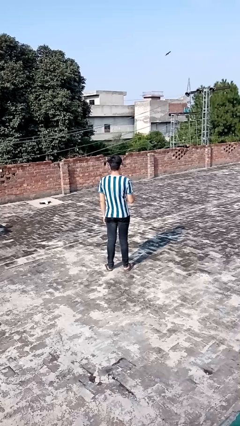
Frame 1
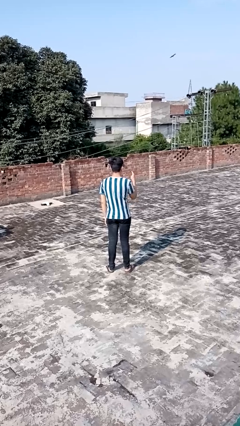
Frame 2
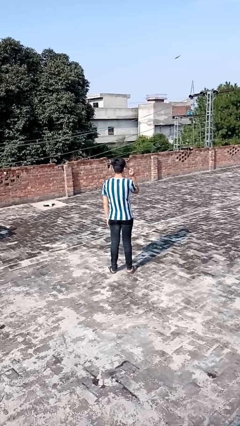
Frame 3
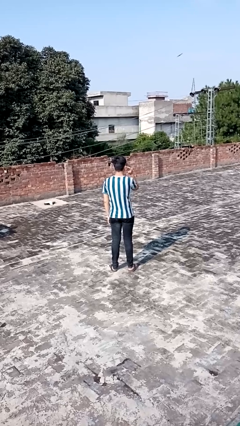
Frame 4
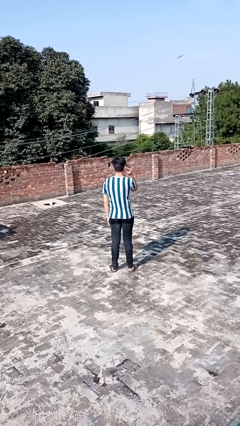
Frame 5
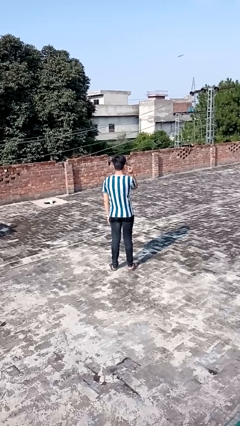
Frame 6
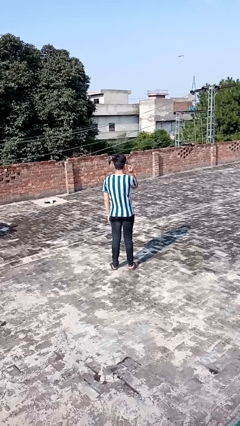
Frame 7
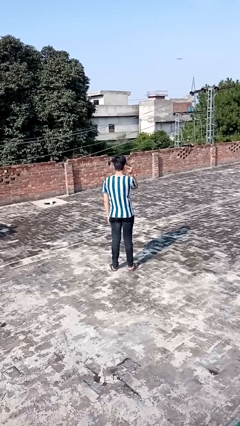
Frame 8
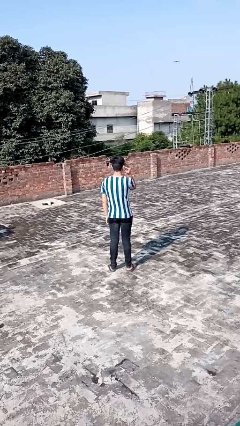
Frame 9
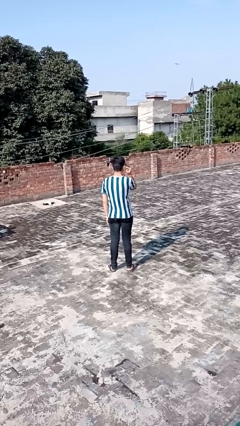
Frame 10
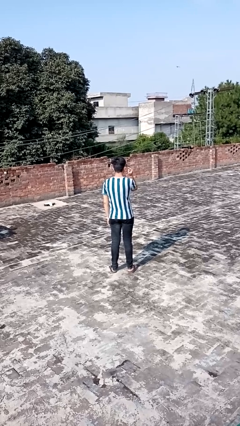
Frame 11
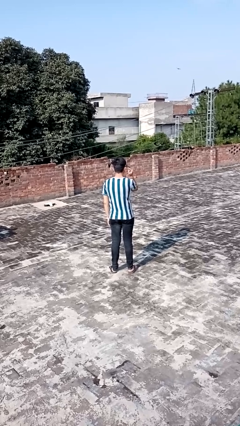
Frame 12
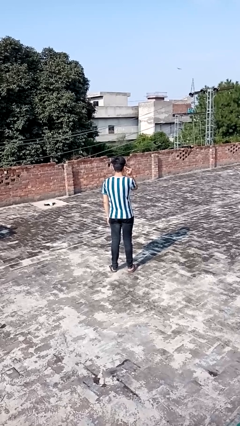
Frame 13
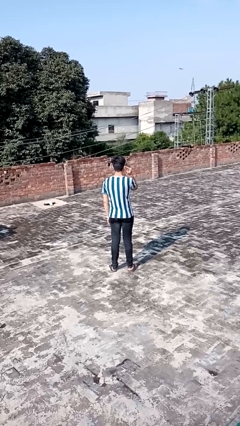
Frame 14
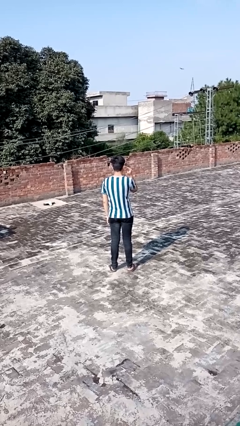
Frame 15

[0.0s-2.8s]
person gestures listen closely

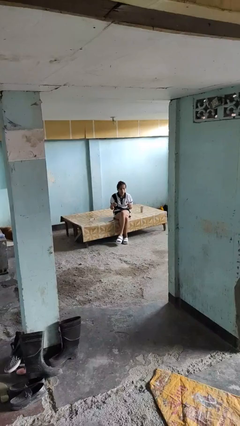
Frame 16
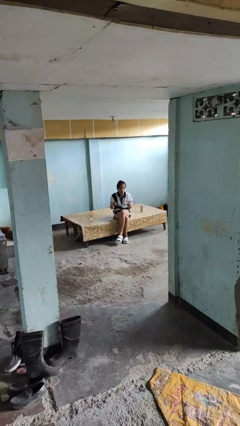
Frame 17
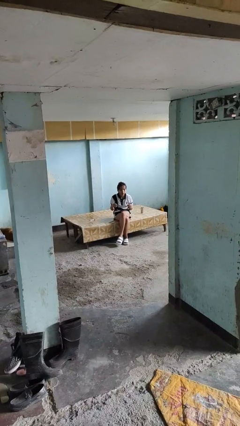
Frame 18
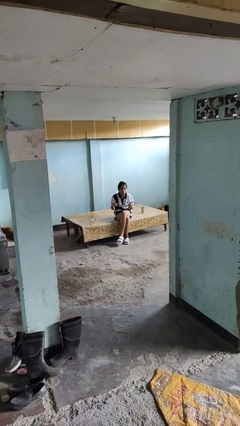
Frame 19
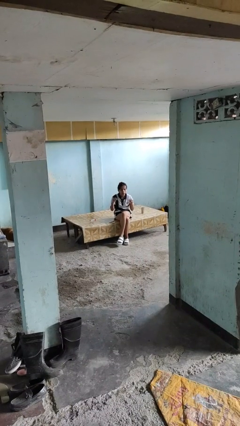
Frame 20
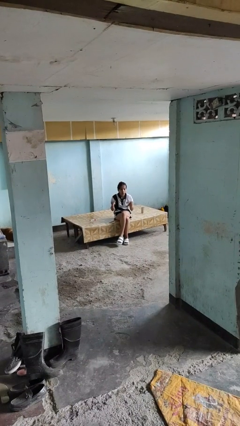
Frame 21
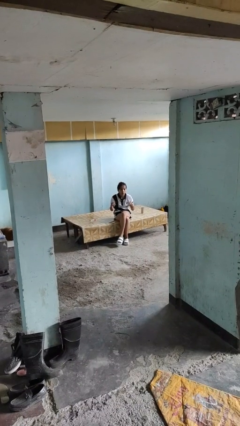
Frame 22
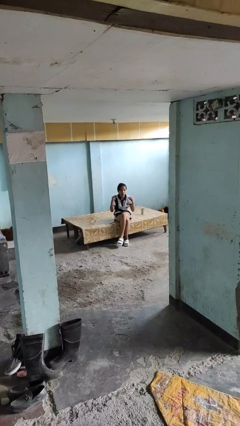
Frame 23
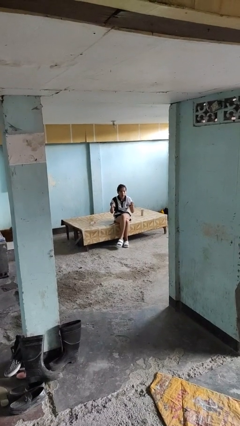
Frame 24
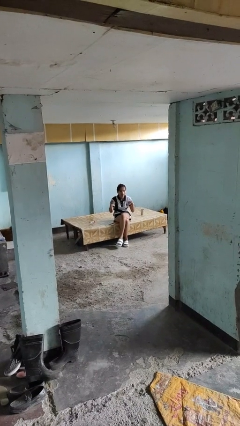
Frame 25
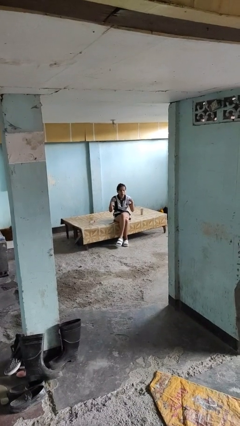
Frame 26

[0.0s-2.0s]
person snaps fingers

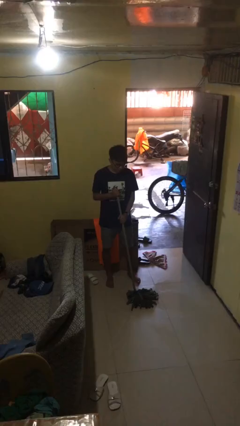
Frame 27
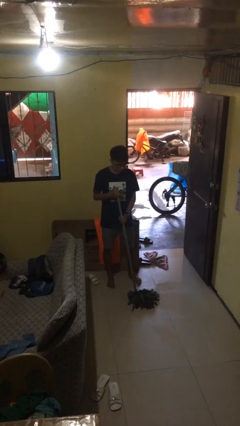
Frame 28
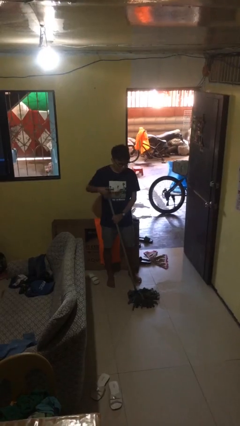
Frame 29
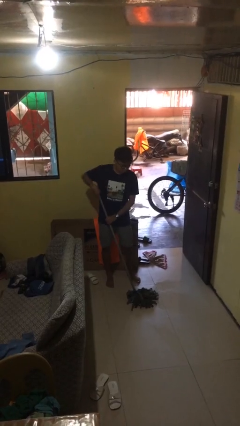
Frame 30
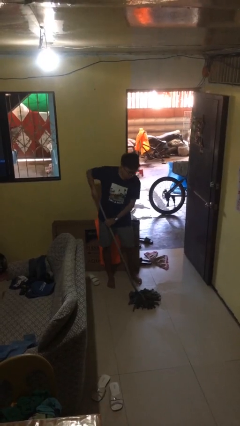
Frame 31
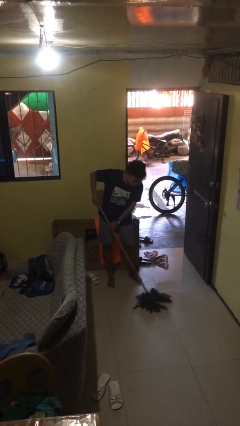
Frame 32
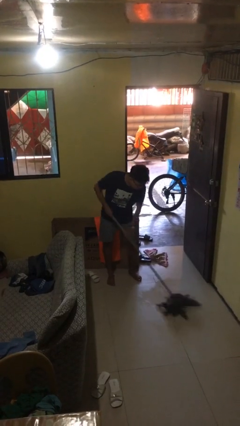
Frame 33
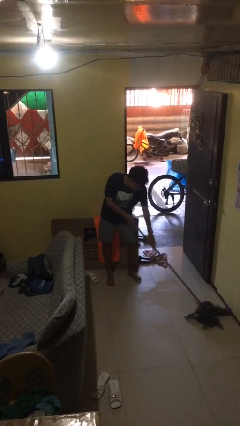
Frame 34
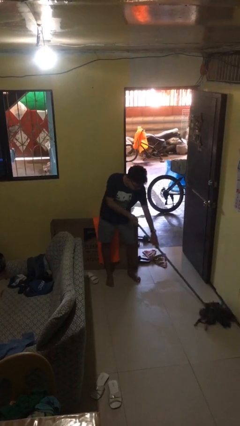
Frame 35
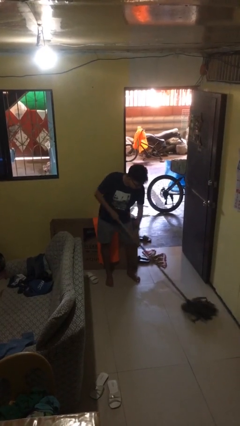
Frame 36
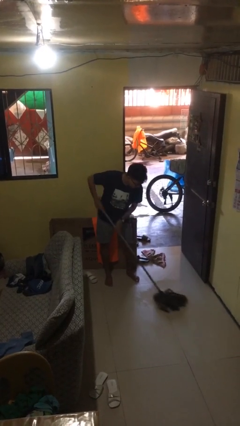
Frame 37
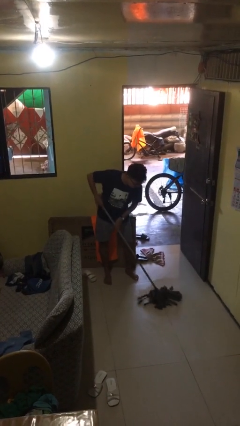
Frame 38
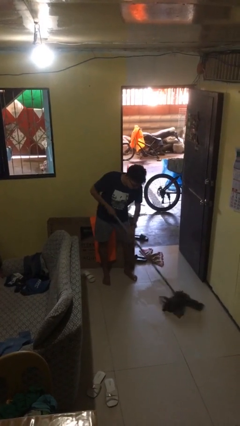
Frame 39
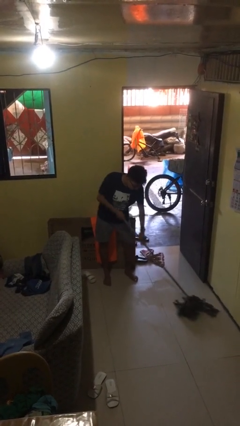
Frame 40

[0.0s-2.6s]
person mops

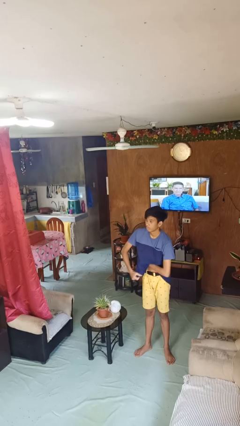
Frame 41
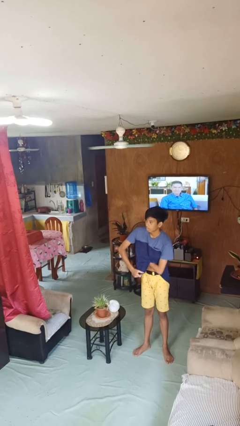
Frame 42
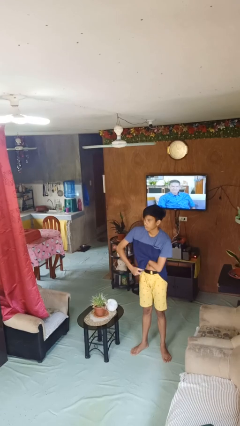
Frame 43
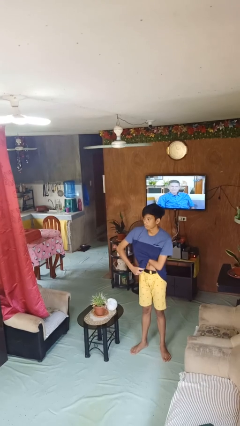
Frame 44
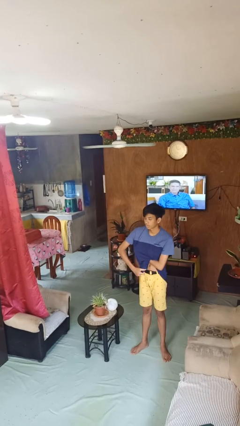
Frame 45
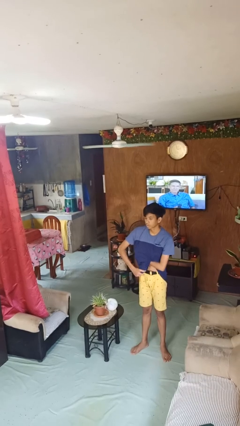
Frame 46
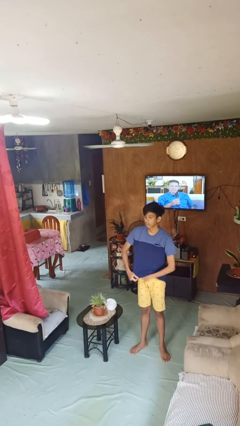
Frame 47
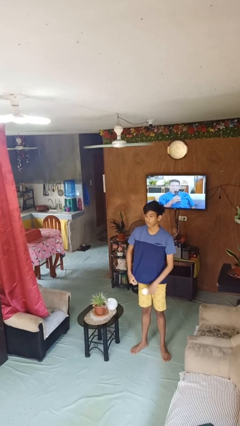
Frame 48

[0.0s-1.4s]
person applies deodorant

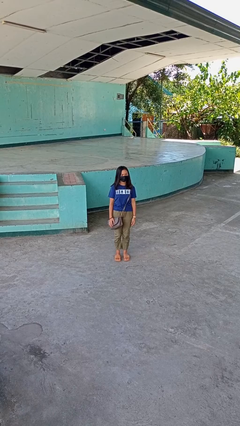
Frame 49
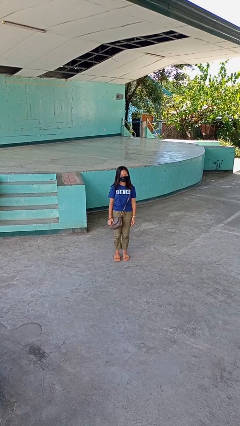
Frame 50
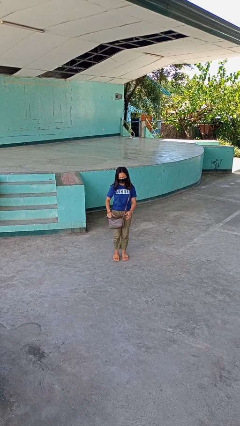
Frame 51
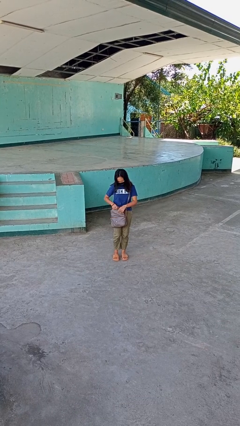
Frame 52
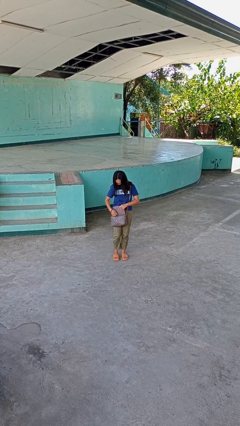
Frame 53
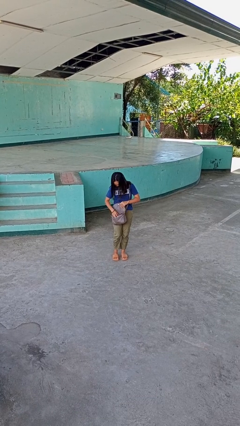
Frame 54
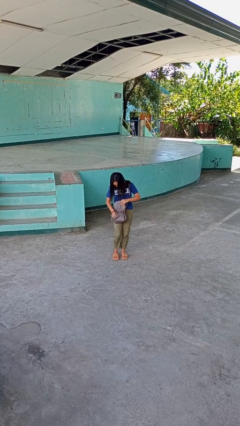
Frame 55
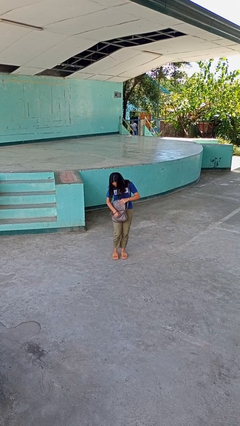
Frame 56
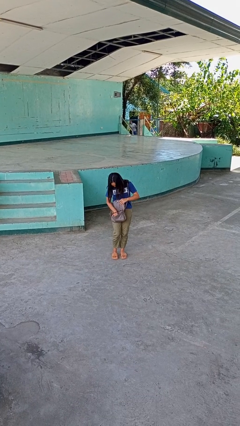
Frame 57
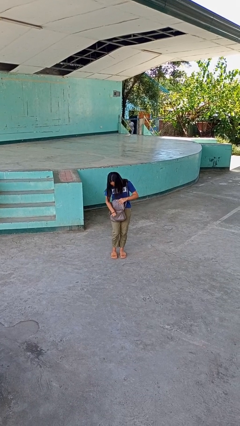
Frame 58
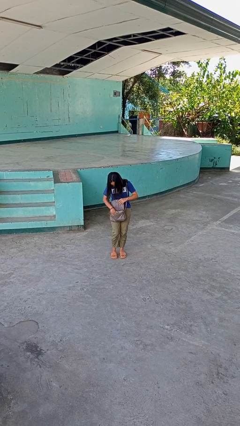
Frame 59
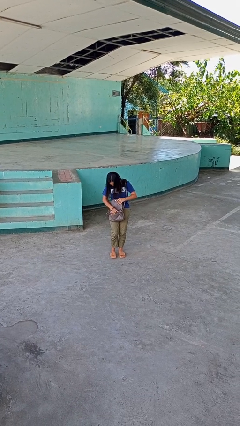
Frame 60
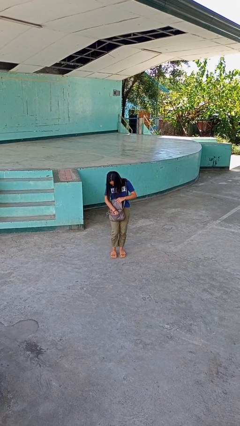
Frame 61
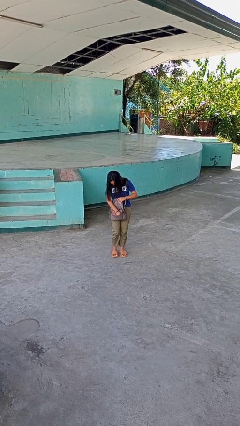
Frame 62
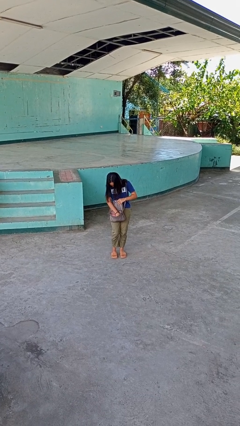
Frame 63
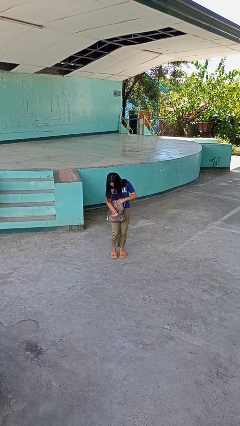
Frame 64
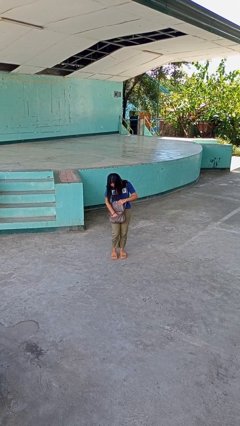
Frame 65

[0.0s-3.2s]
person searches in purse

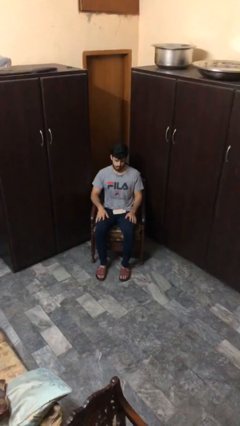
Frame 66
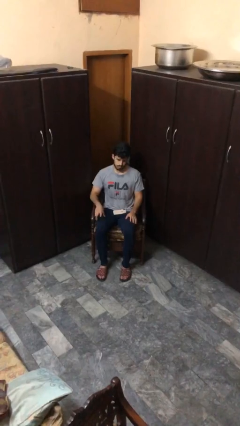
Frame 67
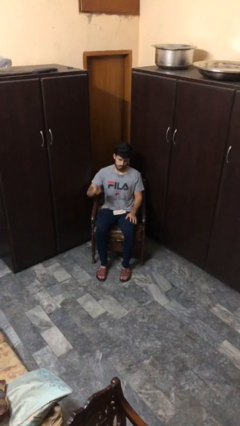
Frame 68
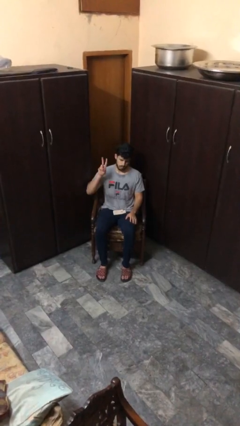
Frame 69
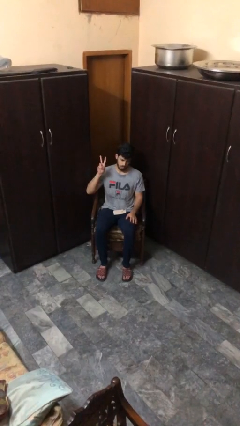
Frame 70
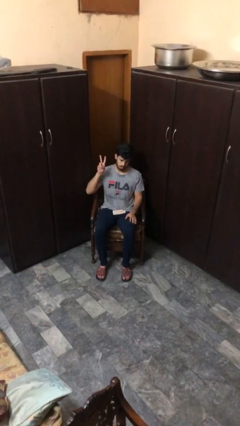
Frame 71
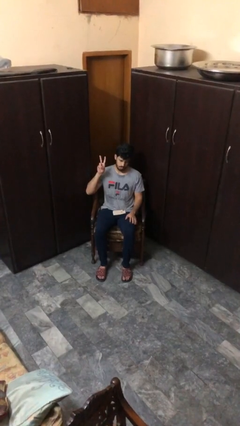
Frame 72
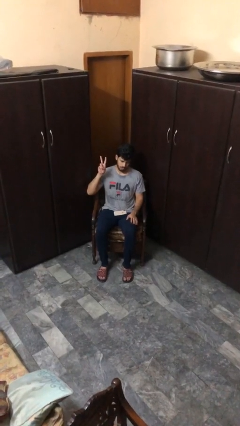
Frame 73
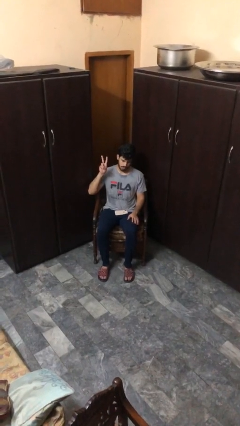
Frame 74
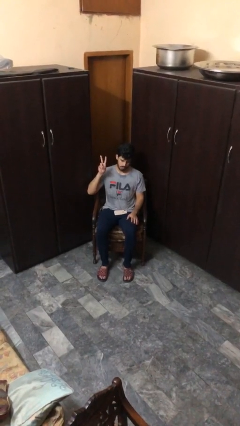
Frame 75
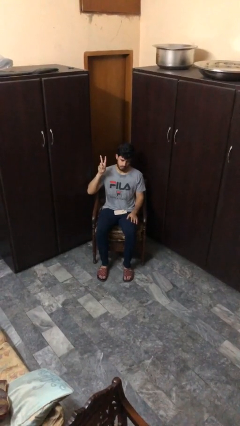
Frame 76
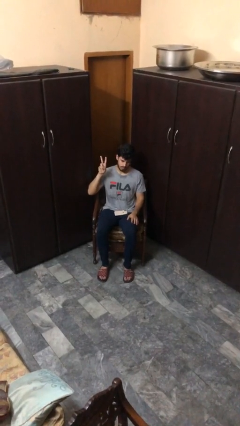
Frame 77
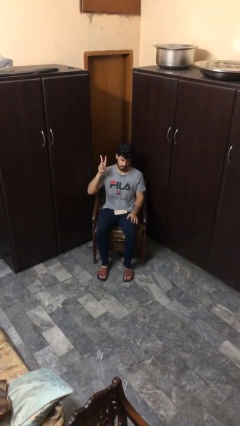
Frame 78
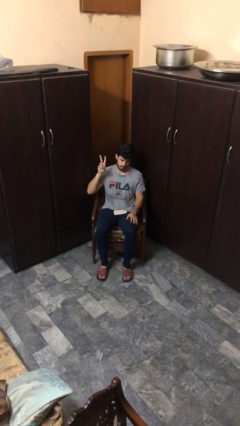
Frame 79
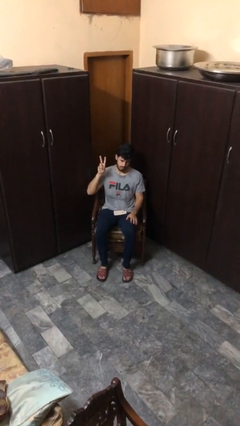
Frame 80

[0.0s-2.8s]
person gestures peace

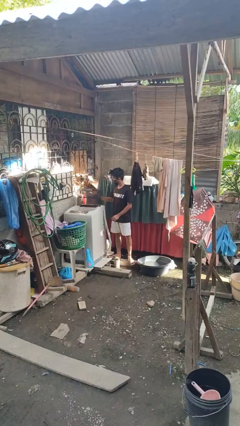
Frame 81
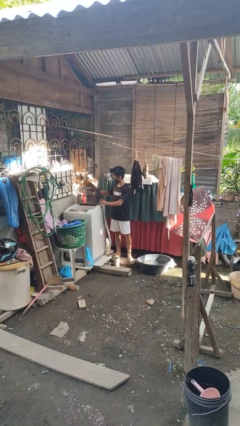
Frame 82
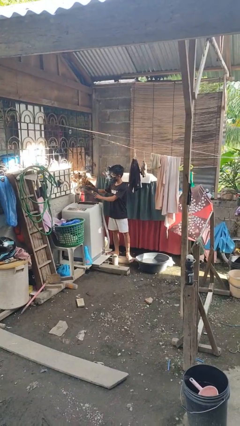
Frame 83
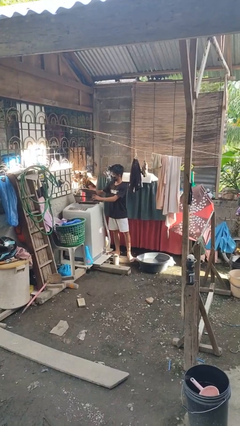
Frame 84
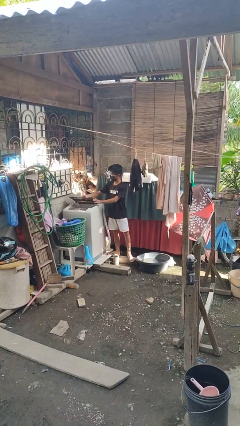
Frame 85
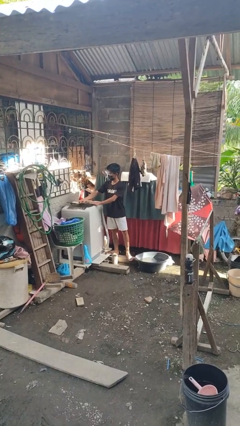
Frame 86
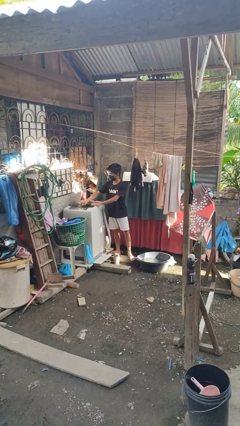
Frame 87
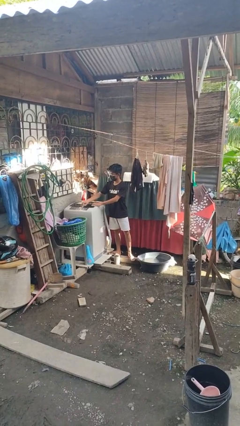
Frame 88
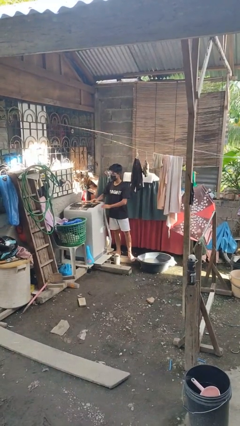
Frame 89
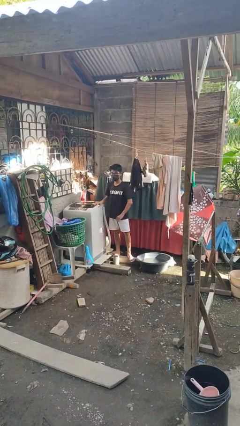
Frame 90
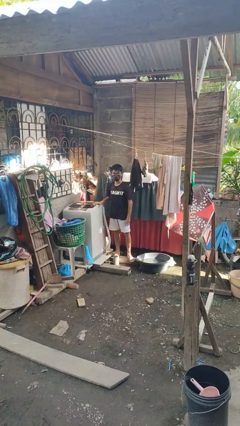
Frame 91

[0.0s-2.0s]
person closes clothes washer

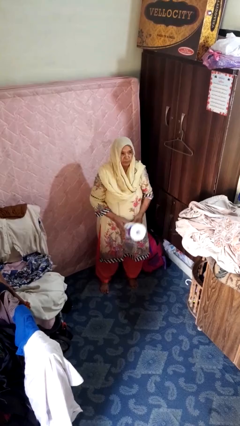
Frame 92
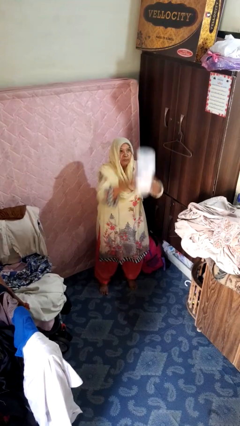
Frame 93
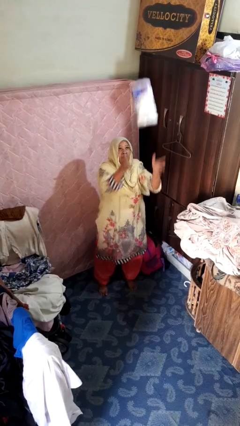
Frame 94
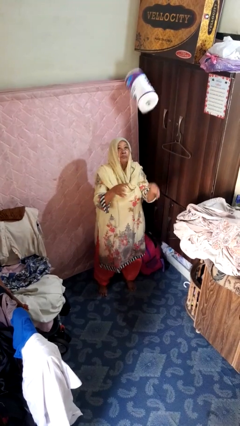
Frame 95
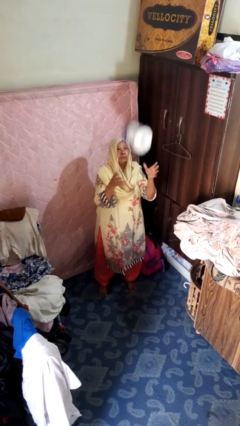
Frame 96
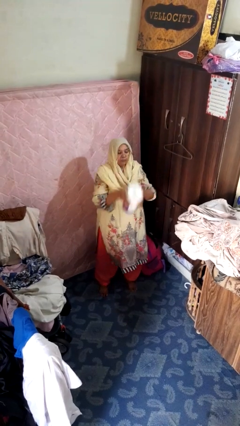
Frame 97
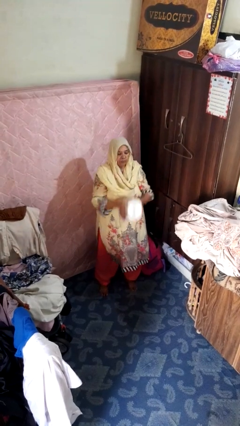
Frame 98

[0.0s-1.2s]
person drops object
